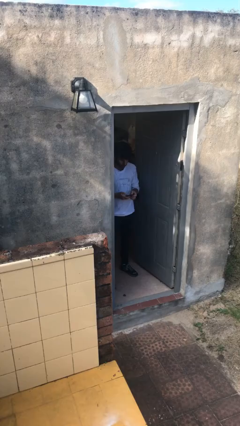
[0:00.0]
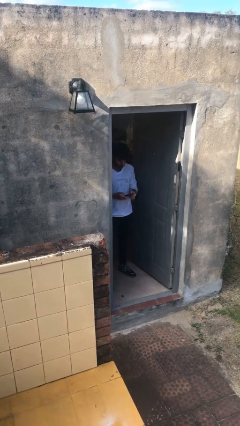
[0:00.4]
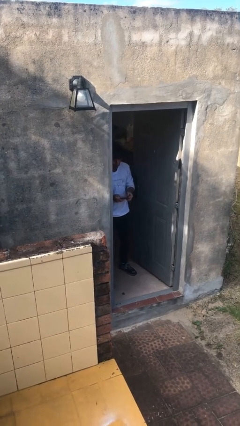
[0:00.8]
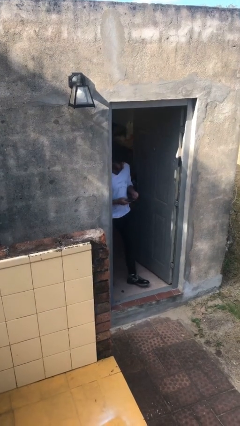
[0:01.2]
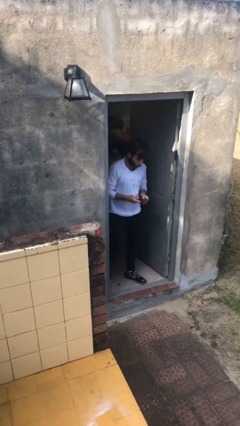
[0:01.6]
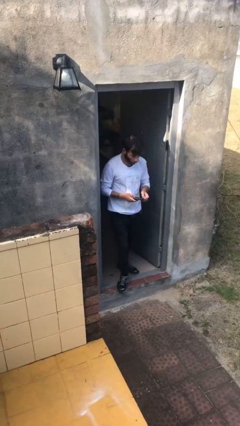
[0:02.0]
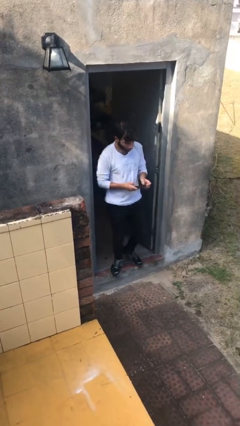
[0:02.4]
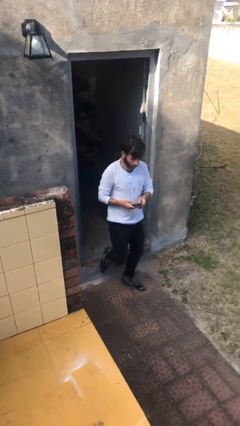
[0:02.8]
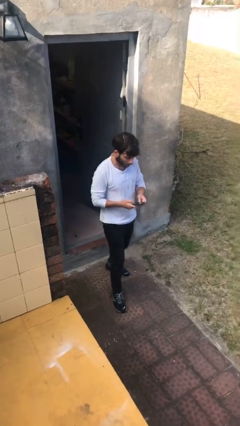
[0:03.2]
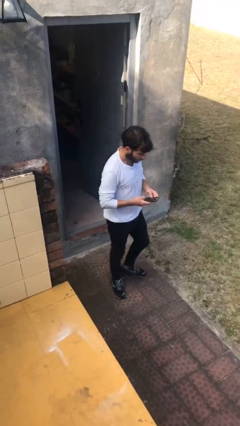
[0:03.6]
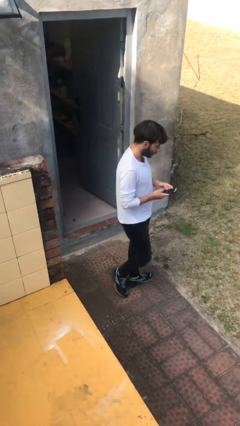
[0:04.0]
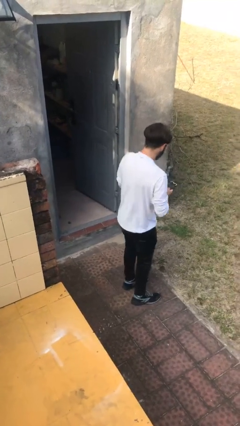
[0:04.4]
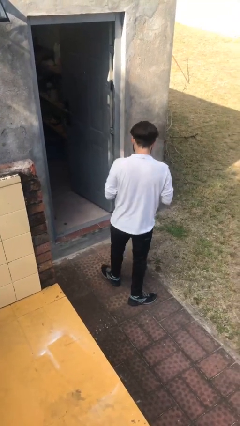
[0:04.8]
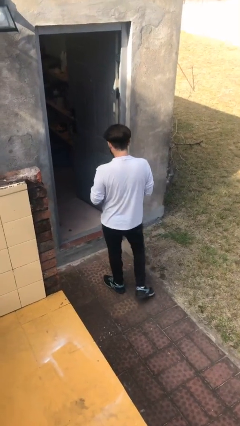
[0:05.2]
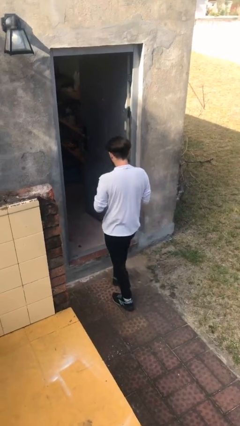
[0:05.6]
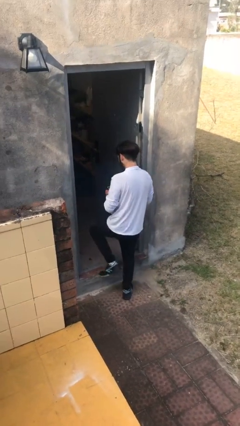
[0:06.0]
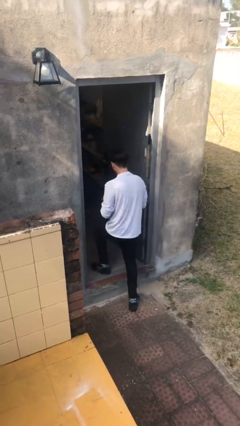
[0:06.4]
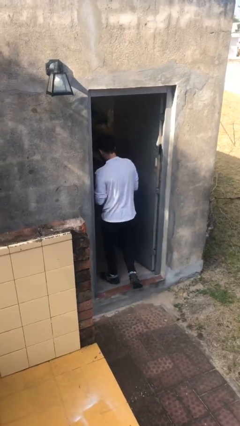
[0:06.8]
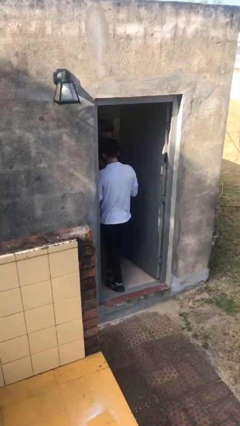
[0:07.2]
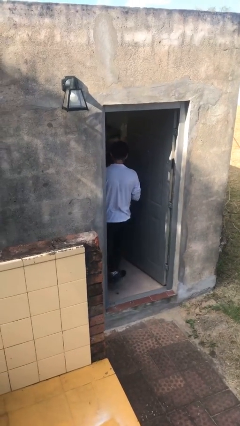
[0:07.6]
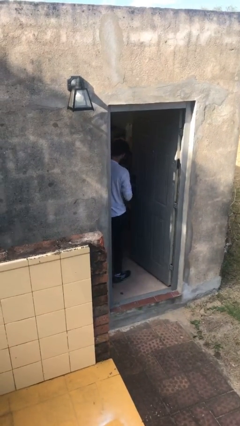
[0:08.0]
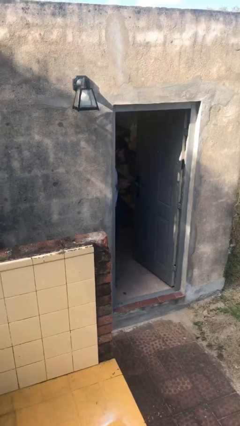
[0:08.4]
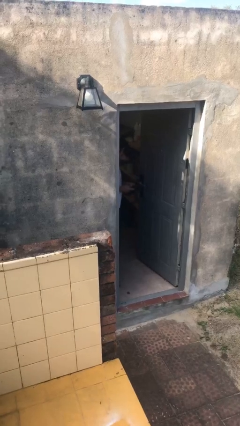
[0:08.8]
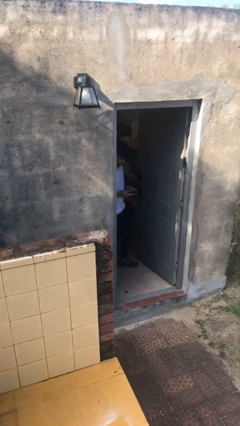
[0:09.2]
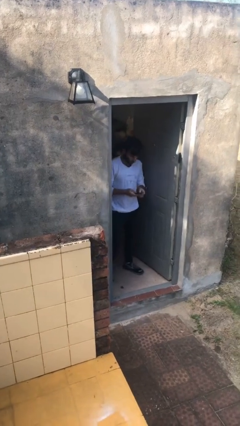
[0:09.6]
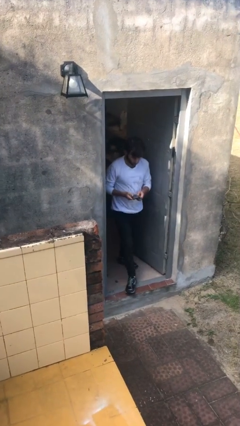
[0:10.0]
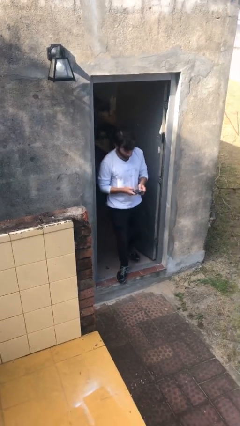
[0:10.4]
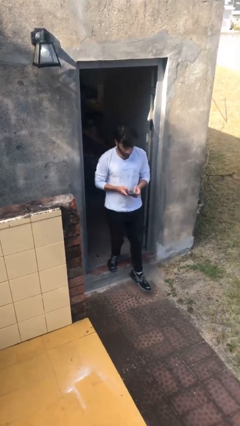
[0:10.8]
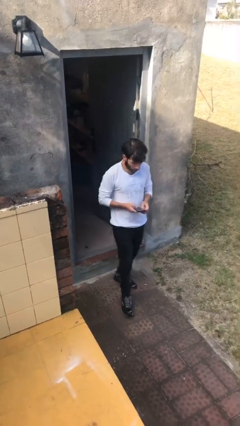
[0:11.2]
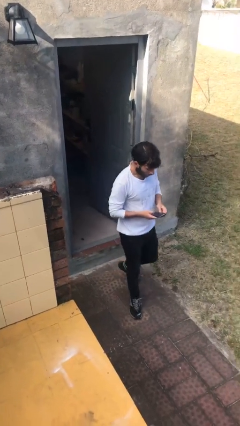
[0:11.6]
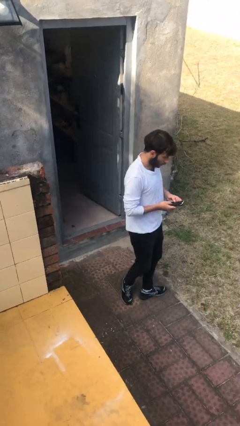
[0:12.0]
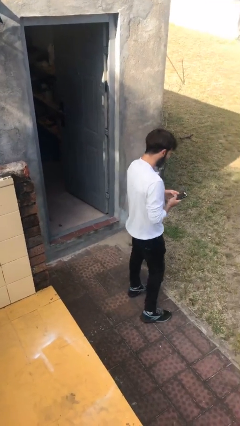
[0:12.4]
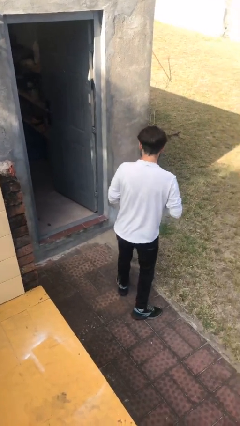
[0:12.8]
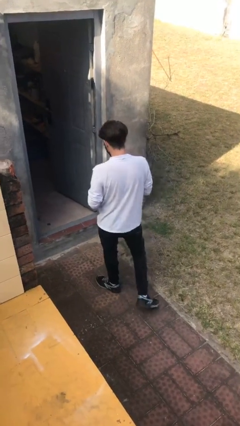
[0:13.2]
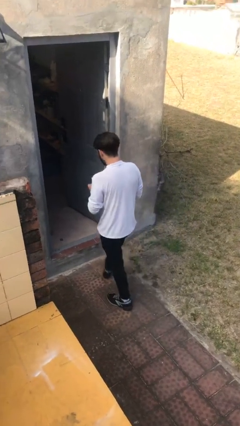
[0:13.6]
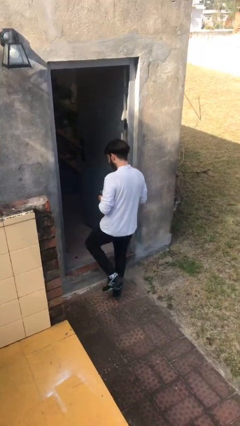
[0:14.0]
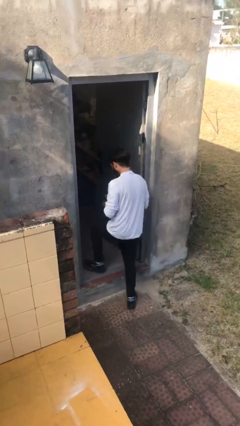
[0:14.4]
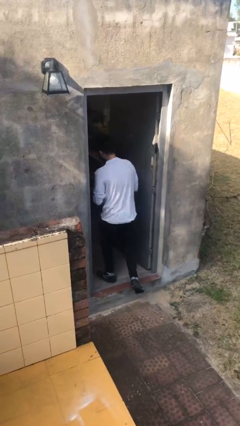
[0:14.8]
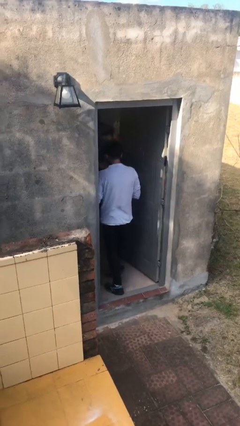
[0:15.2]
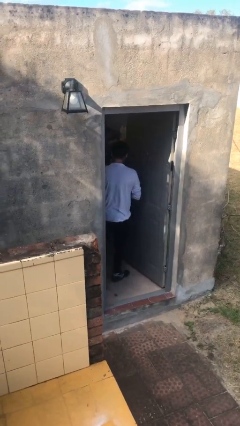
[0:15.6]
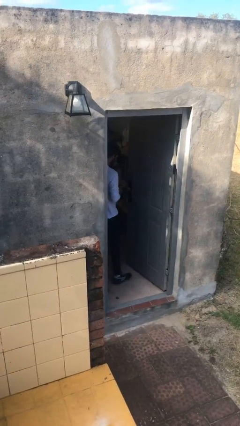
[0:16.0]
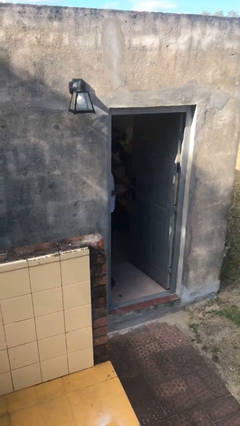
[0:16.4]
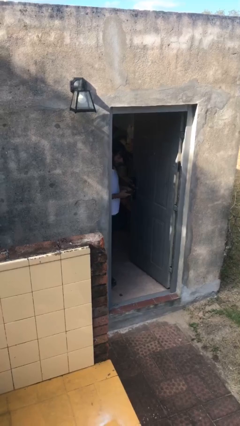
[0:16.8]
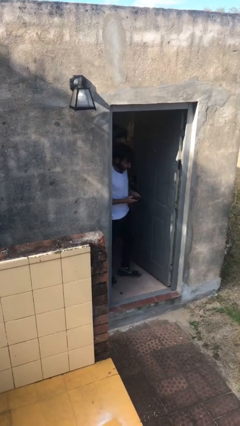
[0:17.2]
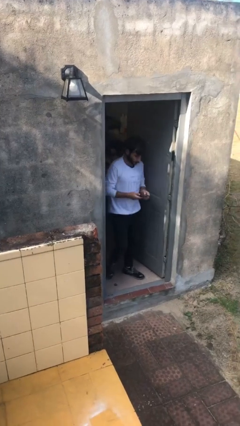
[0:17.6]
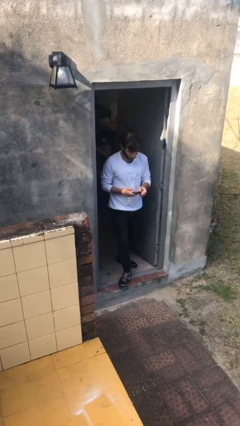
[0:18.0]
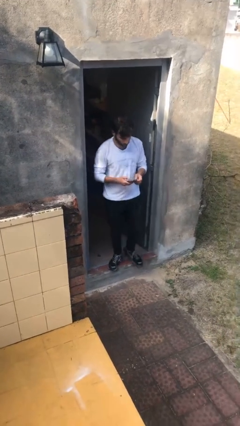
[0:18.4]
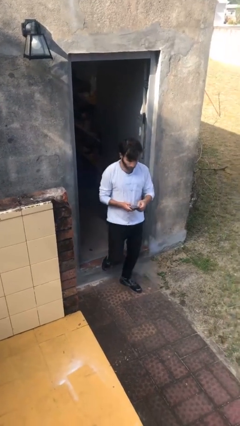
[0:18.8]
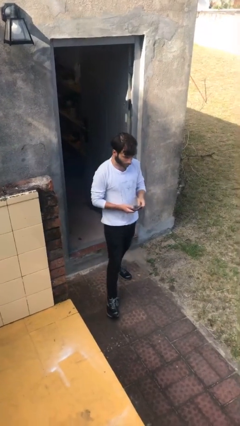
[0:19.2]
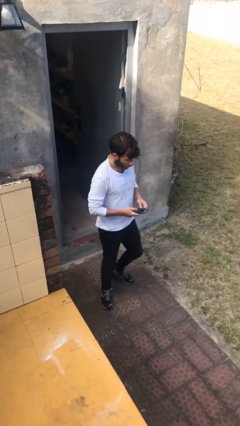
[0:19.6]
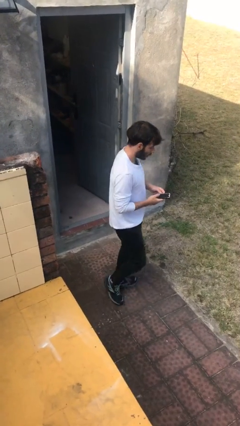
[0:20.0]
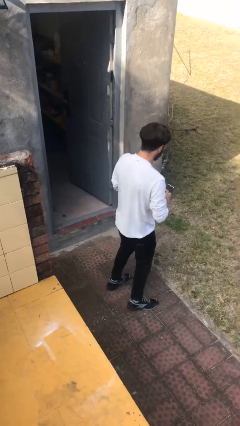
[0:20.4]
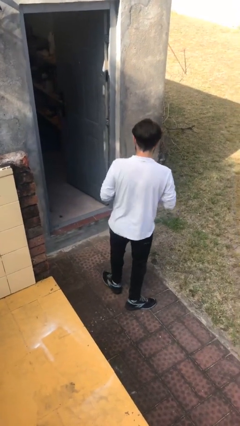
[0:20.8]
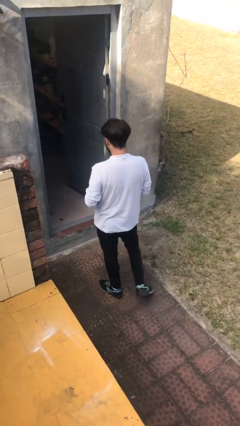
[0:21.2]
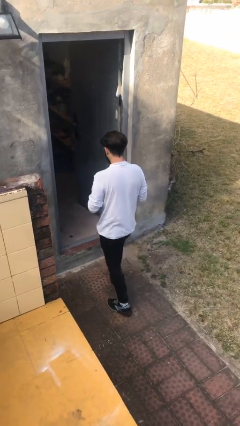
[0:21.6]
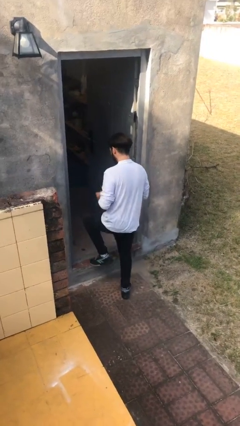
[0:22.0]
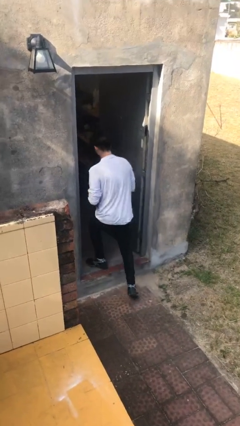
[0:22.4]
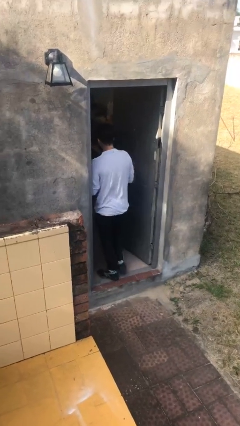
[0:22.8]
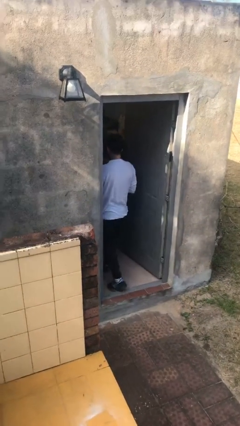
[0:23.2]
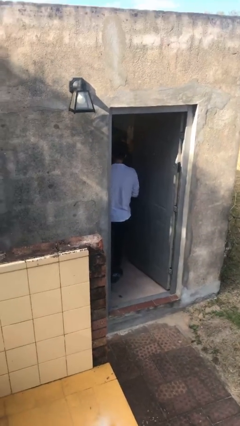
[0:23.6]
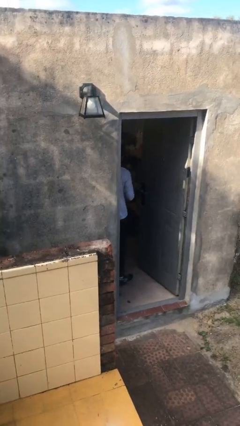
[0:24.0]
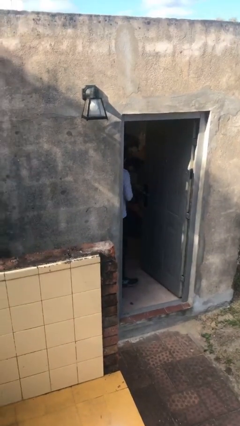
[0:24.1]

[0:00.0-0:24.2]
person texts on phone

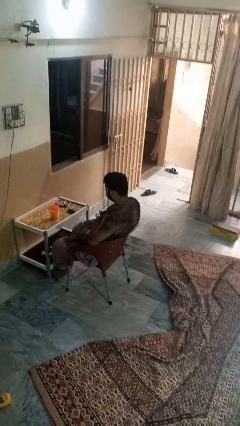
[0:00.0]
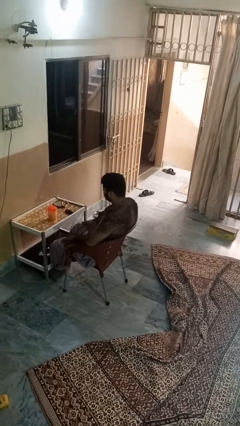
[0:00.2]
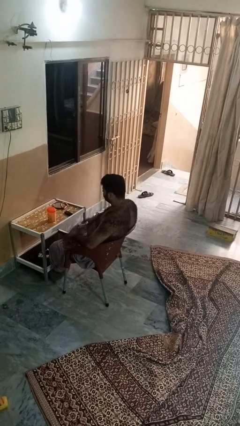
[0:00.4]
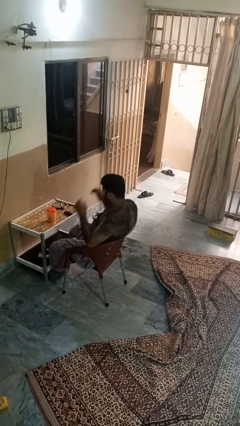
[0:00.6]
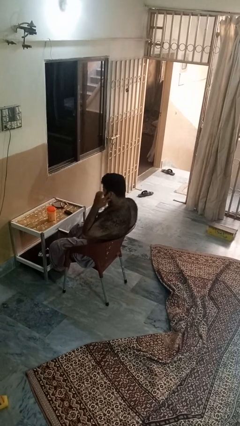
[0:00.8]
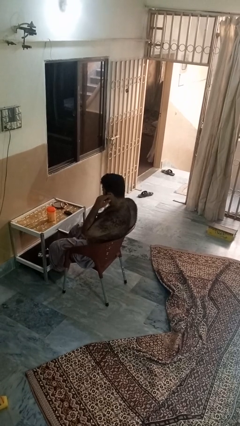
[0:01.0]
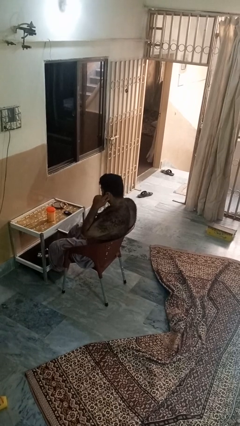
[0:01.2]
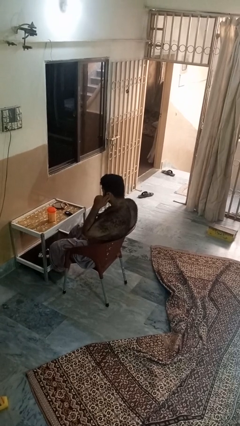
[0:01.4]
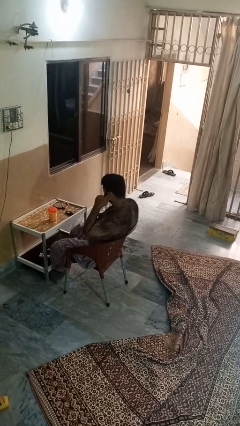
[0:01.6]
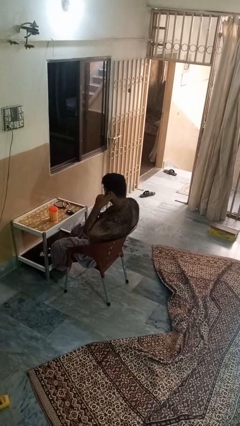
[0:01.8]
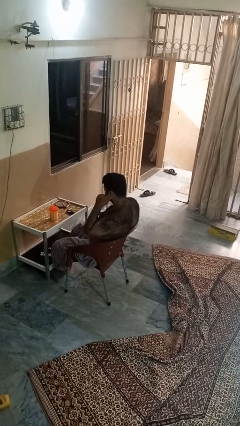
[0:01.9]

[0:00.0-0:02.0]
person puts fingers in ear

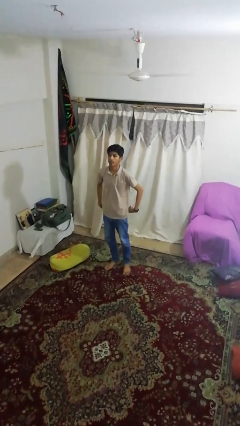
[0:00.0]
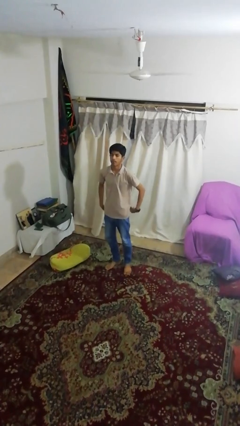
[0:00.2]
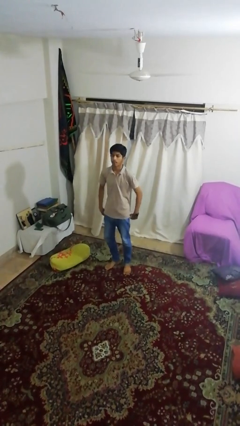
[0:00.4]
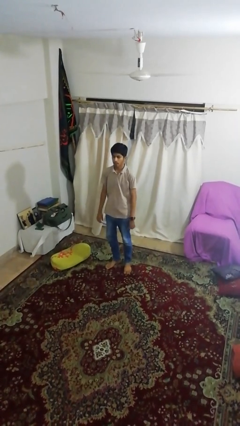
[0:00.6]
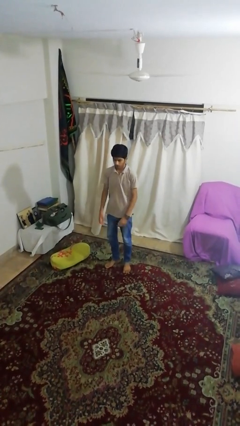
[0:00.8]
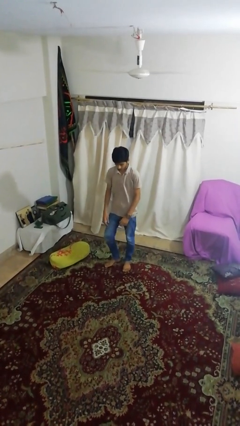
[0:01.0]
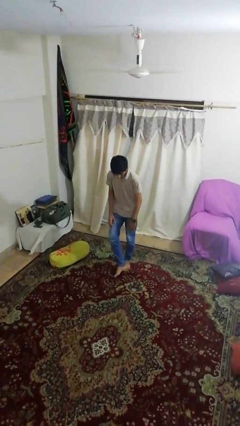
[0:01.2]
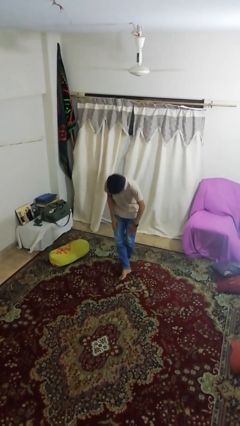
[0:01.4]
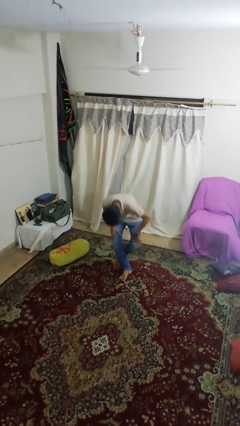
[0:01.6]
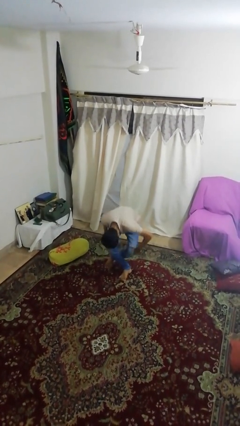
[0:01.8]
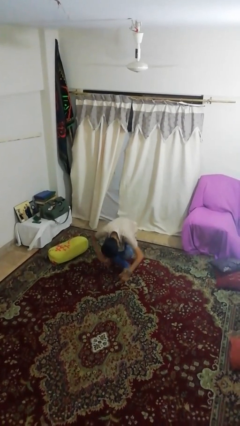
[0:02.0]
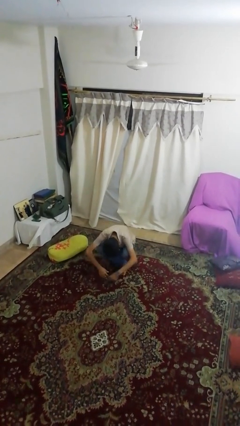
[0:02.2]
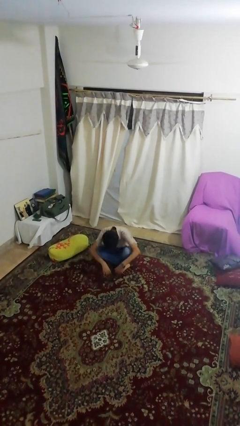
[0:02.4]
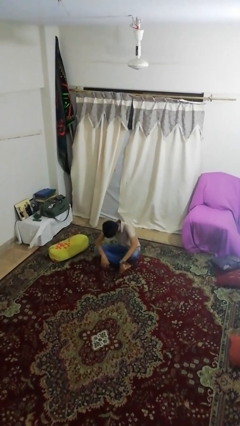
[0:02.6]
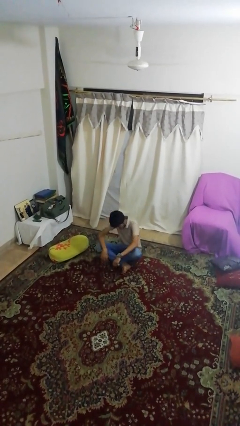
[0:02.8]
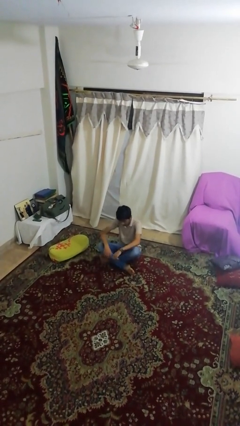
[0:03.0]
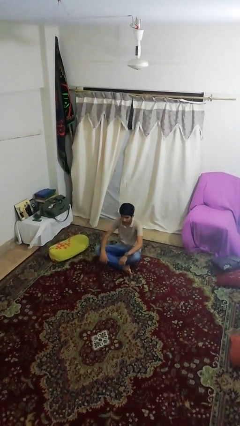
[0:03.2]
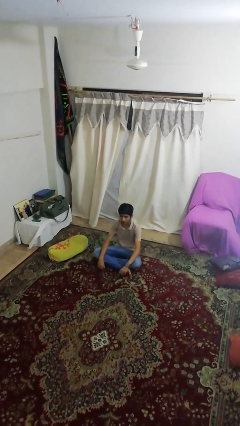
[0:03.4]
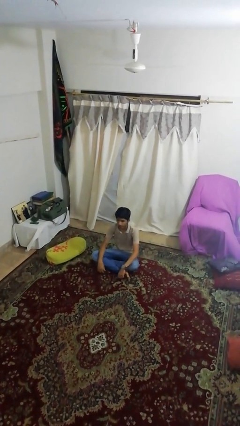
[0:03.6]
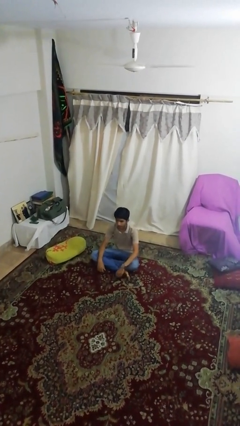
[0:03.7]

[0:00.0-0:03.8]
person sits crisscross
